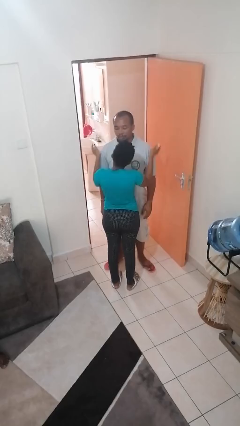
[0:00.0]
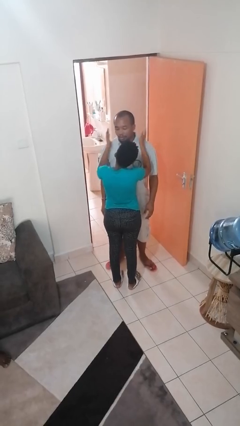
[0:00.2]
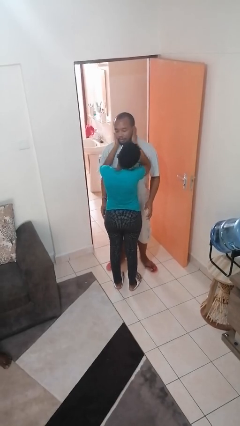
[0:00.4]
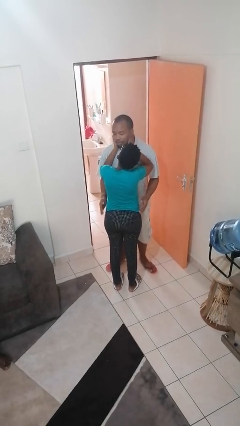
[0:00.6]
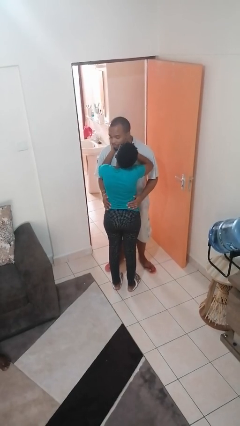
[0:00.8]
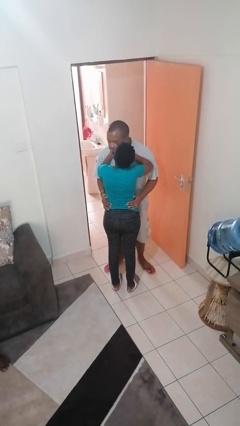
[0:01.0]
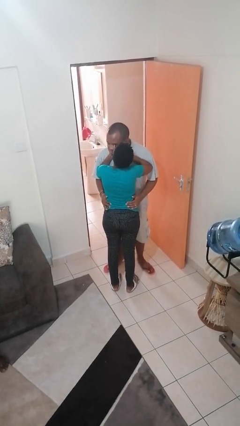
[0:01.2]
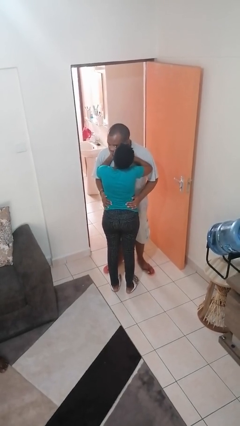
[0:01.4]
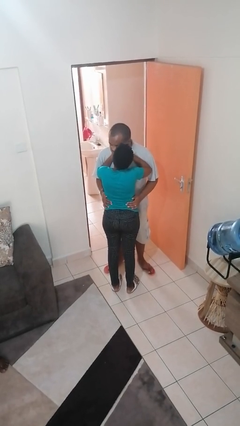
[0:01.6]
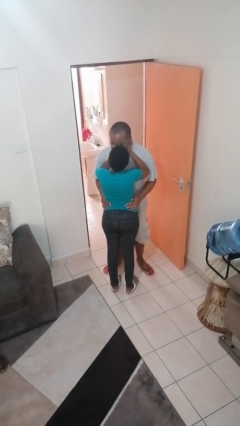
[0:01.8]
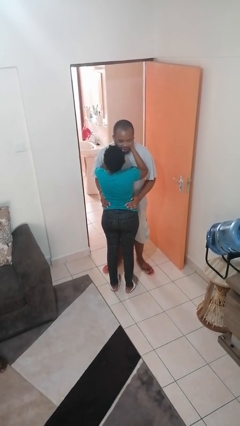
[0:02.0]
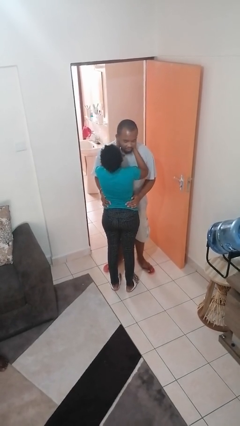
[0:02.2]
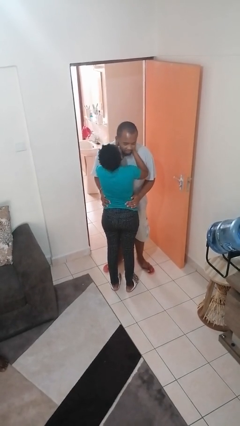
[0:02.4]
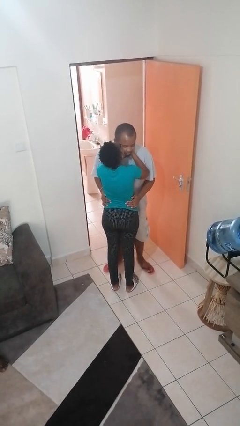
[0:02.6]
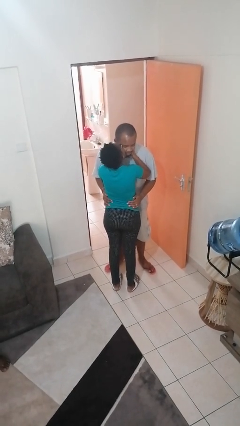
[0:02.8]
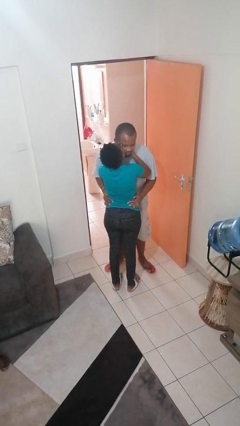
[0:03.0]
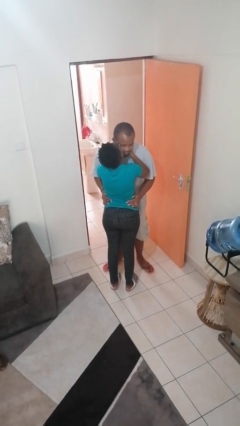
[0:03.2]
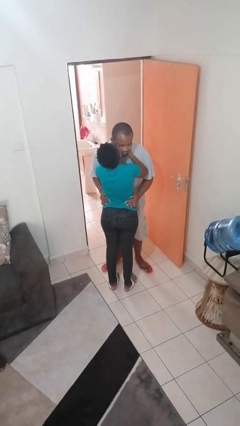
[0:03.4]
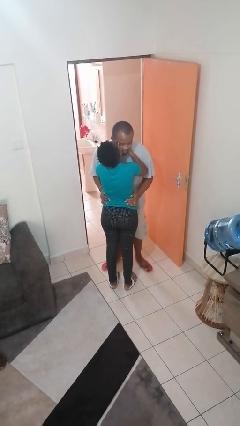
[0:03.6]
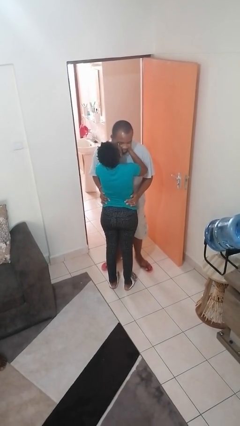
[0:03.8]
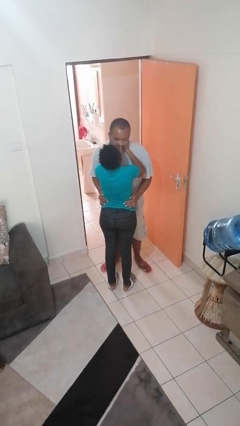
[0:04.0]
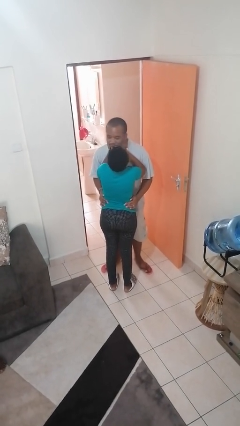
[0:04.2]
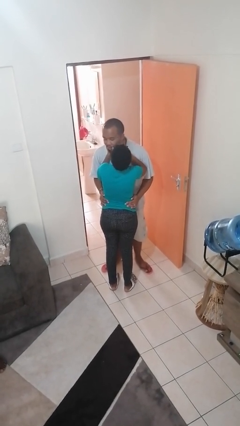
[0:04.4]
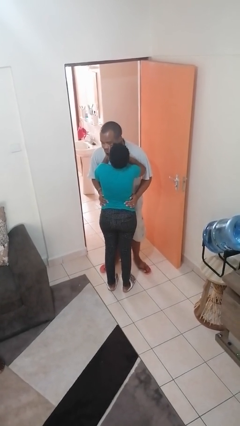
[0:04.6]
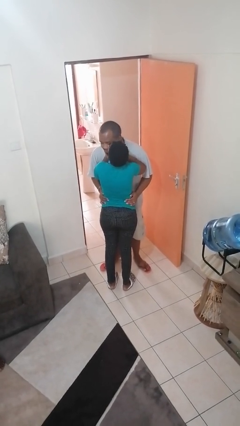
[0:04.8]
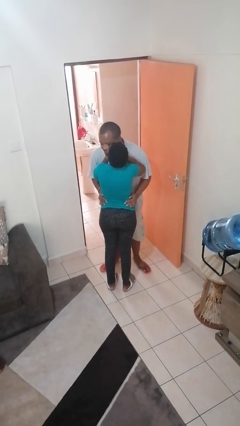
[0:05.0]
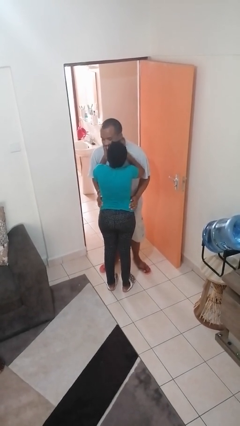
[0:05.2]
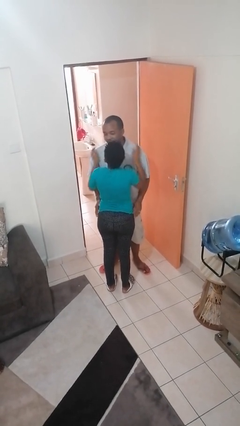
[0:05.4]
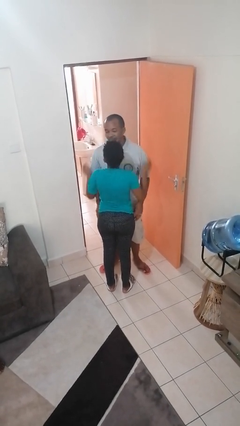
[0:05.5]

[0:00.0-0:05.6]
person kisses cheek of person

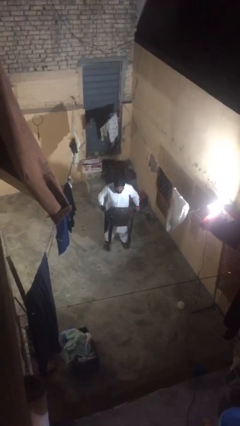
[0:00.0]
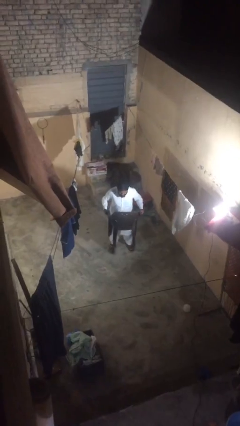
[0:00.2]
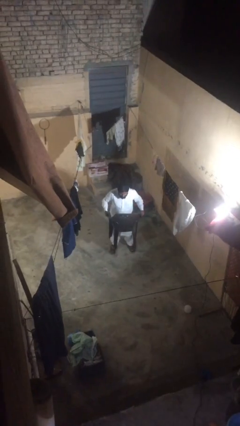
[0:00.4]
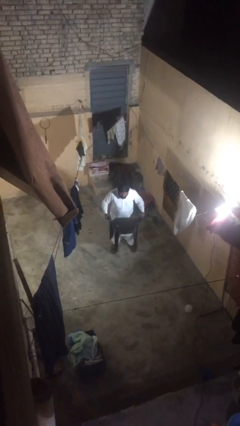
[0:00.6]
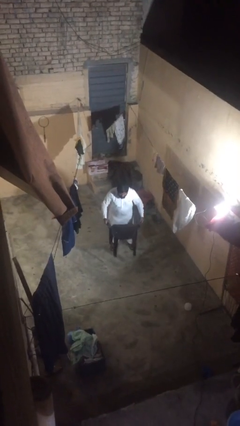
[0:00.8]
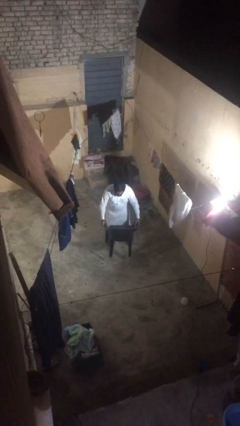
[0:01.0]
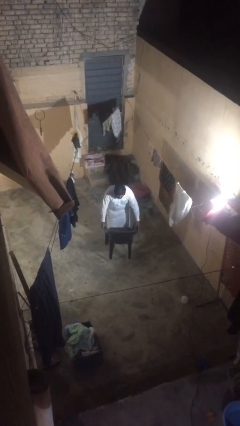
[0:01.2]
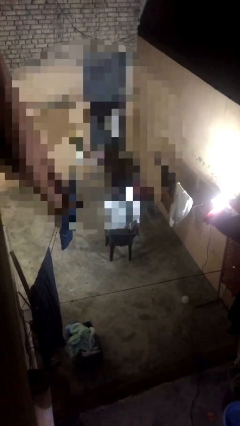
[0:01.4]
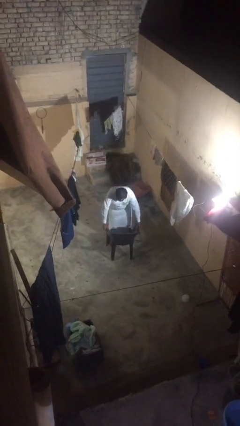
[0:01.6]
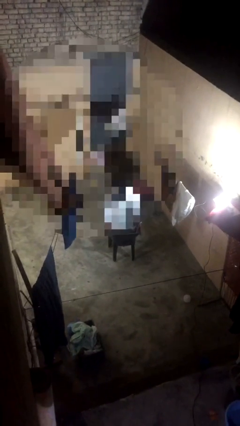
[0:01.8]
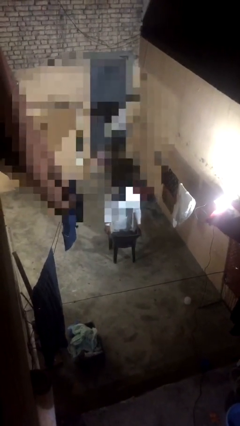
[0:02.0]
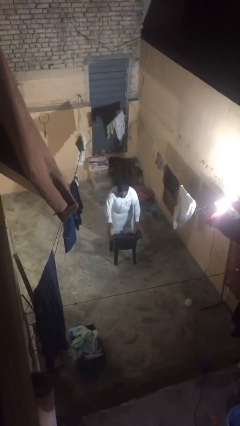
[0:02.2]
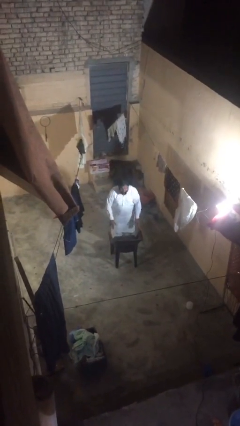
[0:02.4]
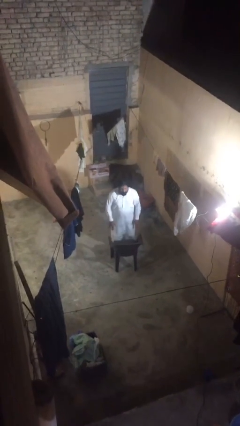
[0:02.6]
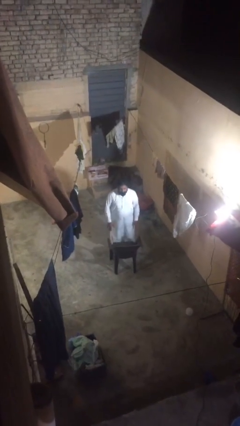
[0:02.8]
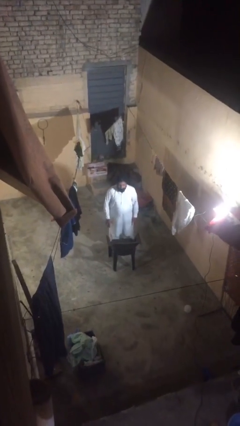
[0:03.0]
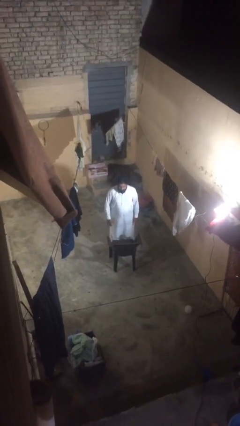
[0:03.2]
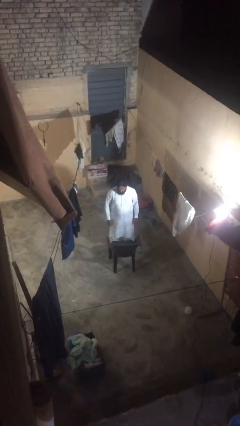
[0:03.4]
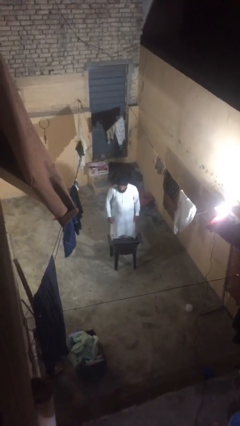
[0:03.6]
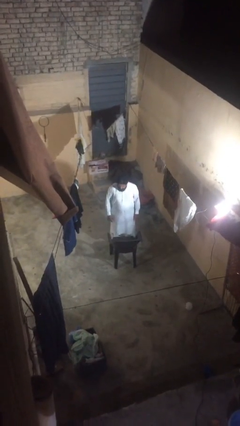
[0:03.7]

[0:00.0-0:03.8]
person puts down object on floor

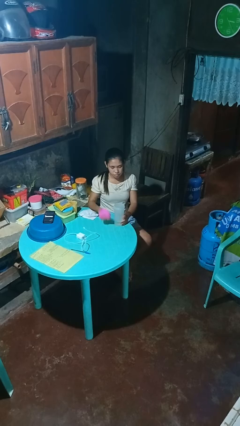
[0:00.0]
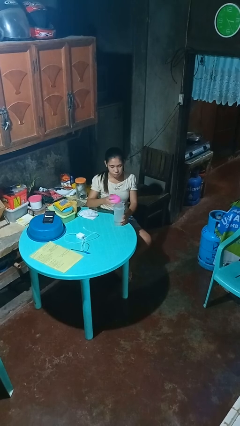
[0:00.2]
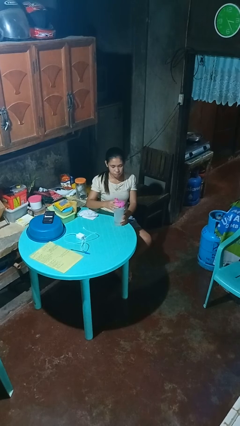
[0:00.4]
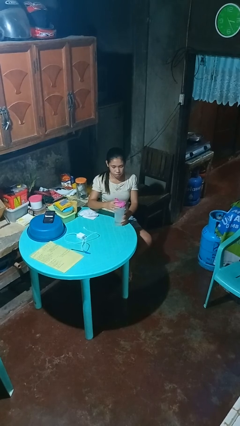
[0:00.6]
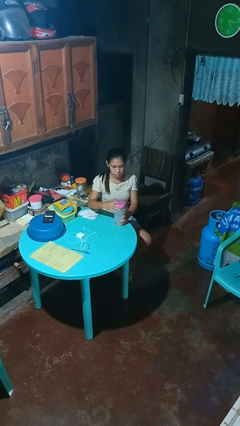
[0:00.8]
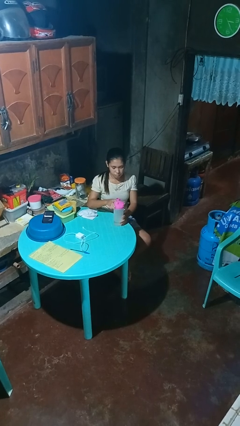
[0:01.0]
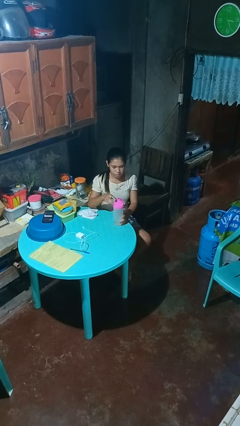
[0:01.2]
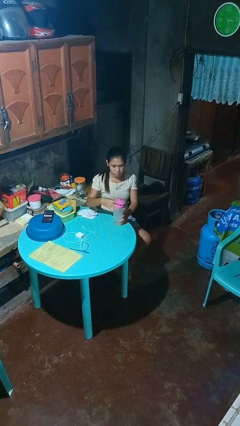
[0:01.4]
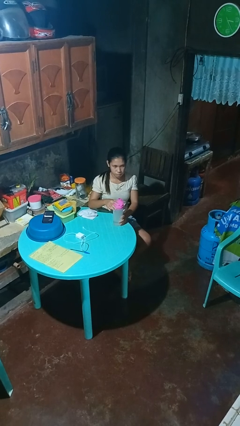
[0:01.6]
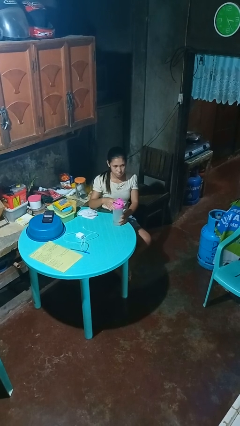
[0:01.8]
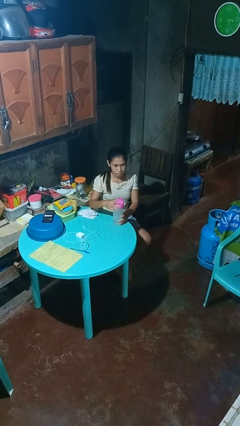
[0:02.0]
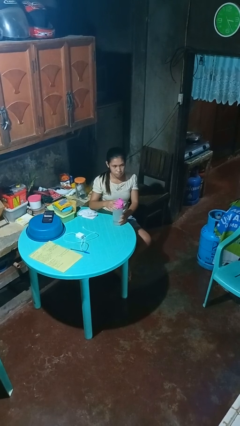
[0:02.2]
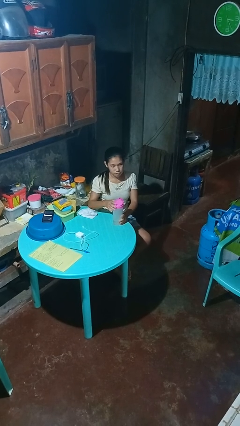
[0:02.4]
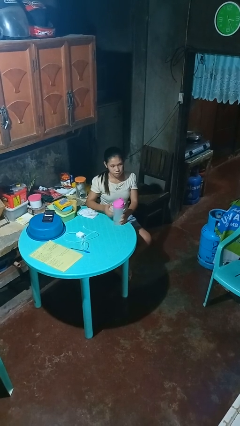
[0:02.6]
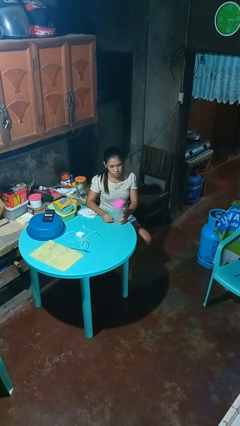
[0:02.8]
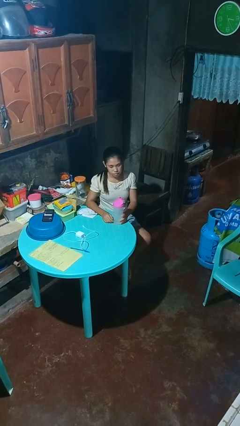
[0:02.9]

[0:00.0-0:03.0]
person screws lid to bottle

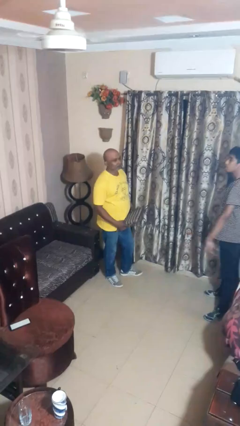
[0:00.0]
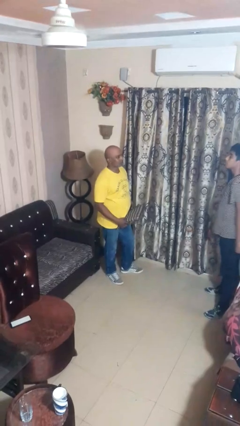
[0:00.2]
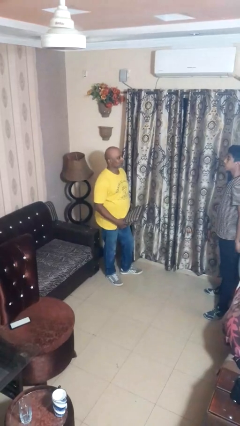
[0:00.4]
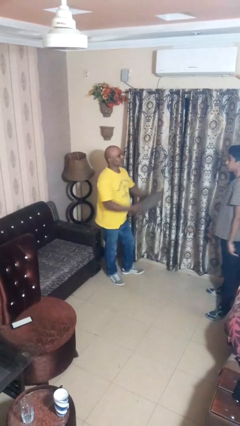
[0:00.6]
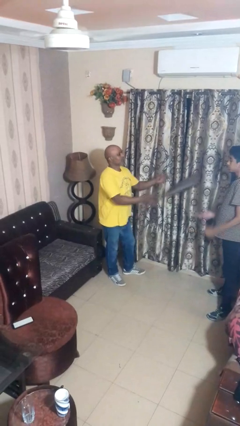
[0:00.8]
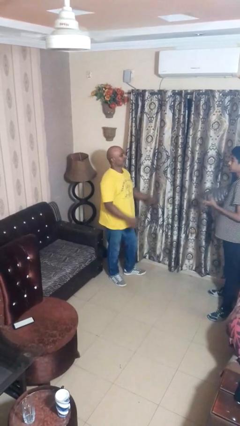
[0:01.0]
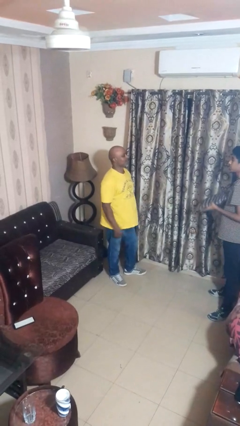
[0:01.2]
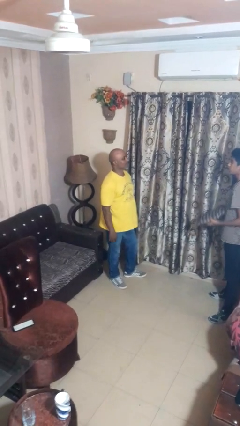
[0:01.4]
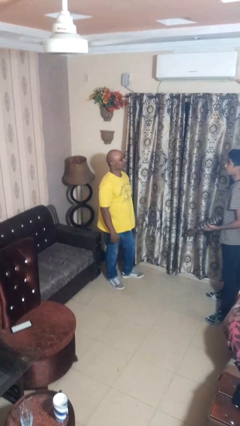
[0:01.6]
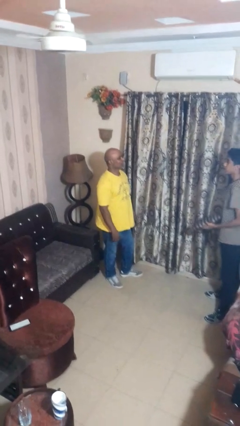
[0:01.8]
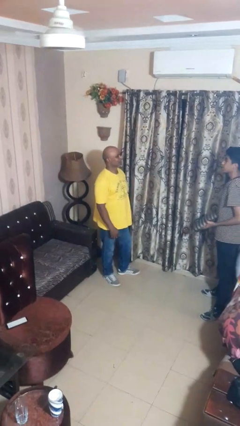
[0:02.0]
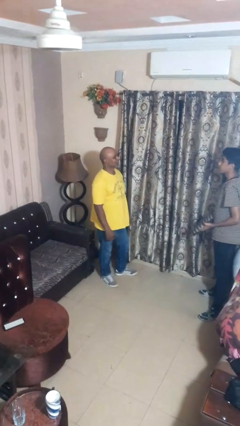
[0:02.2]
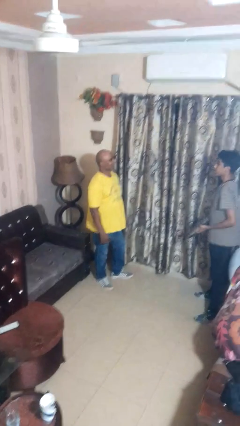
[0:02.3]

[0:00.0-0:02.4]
person throws object to person

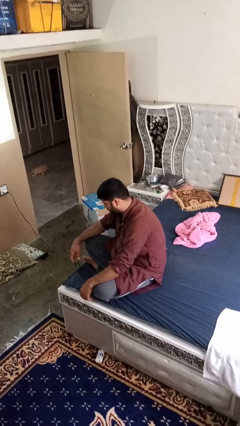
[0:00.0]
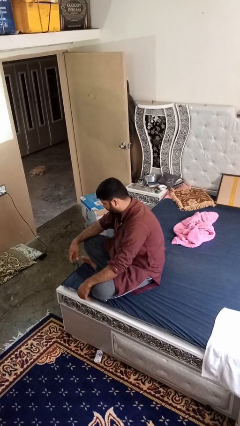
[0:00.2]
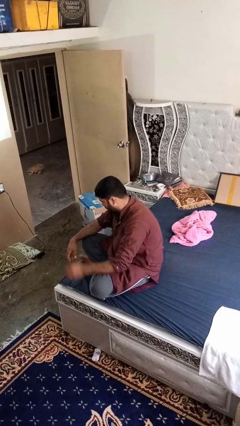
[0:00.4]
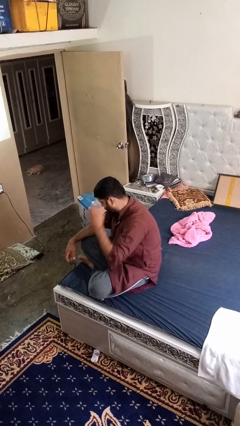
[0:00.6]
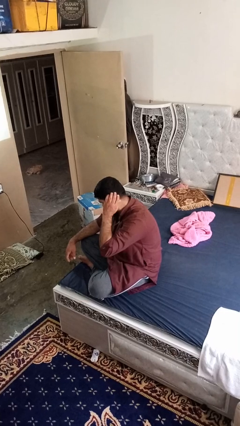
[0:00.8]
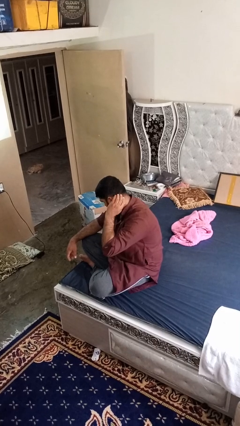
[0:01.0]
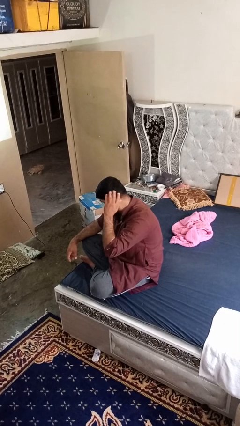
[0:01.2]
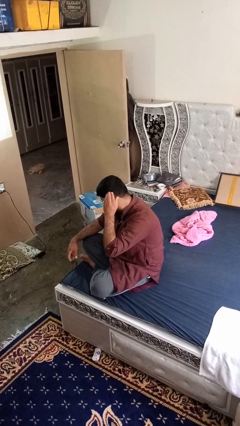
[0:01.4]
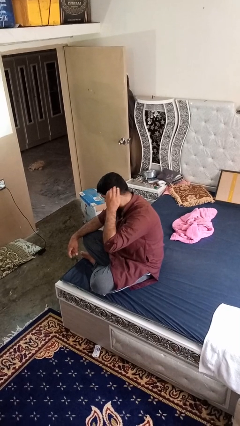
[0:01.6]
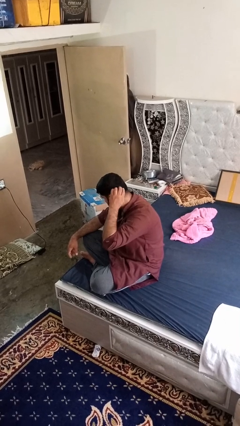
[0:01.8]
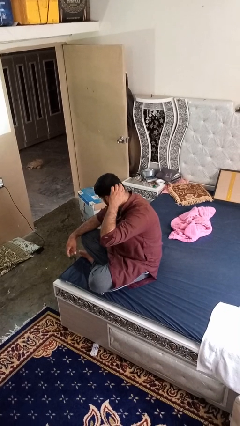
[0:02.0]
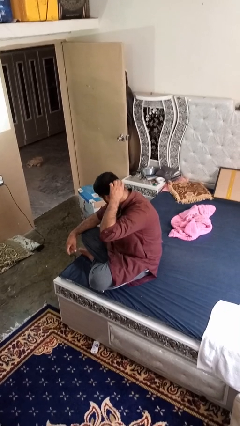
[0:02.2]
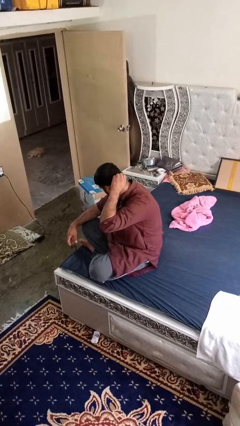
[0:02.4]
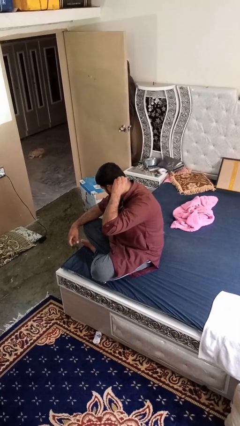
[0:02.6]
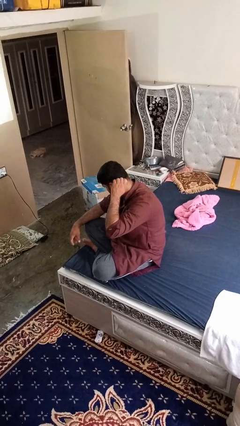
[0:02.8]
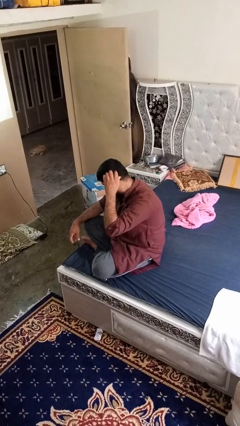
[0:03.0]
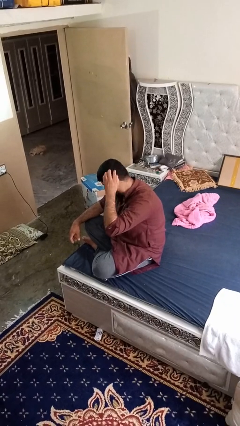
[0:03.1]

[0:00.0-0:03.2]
person strokes hair
